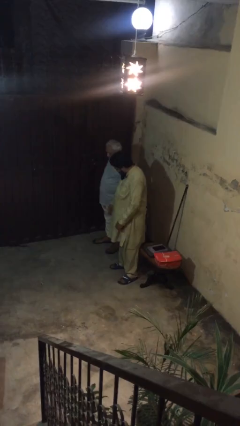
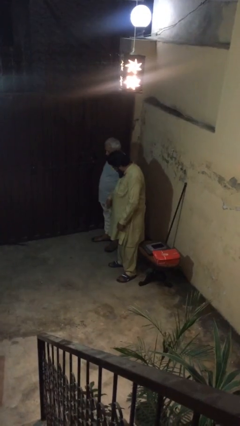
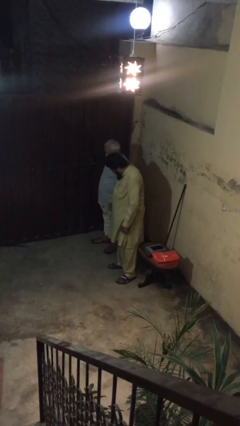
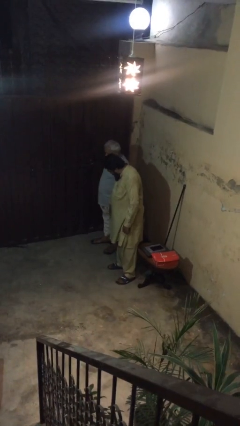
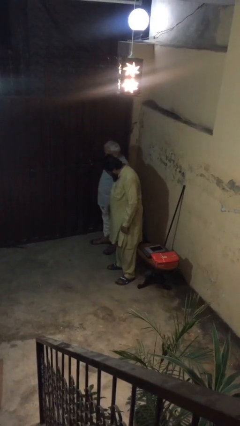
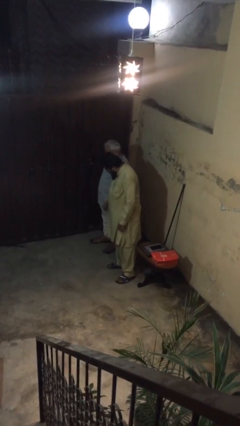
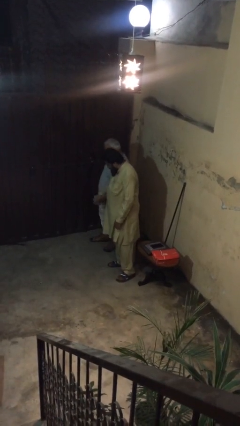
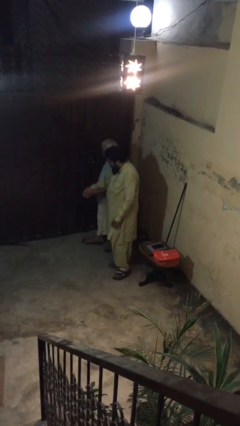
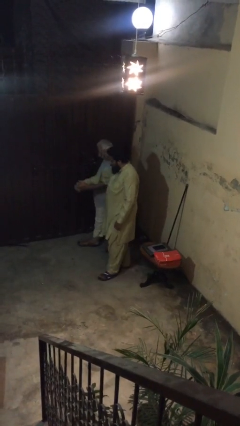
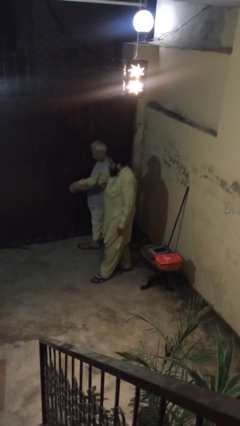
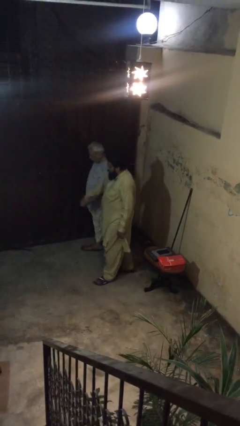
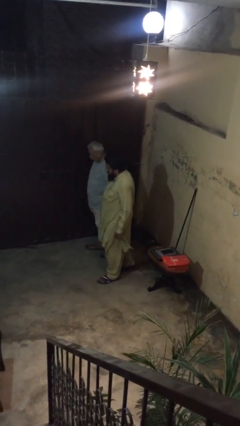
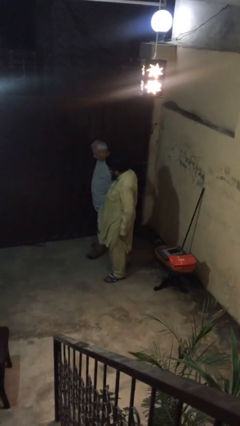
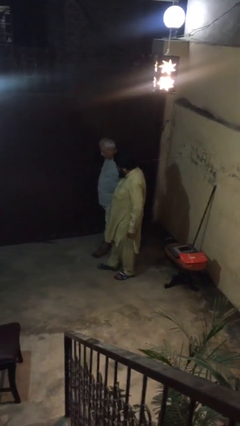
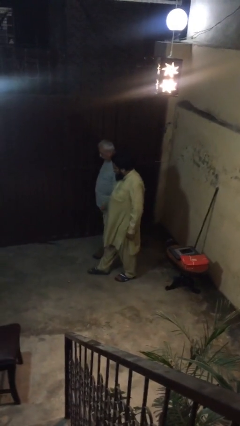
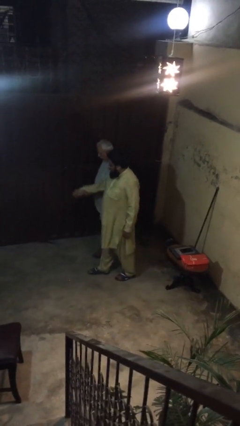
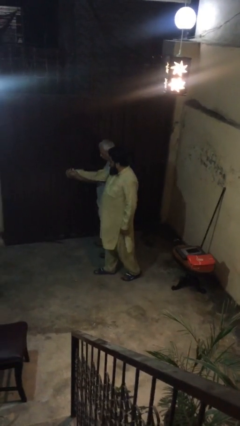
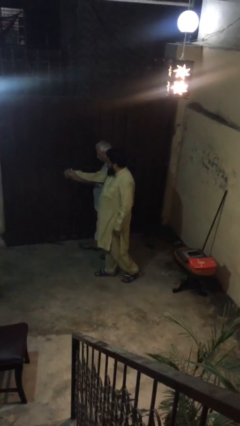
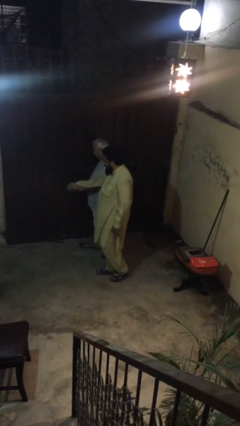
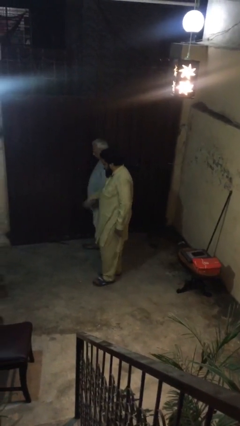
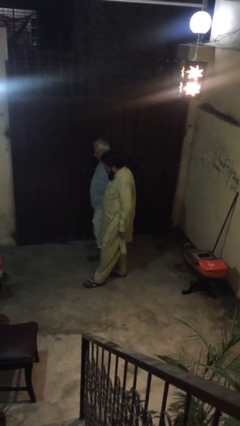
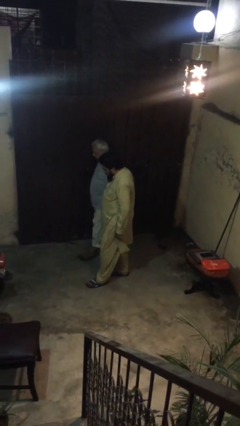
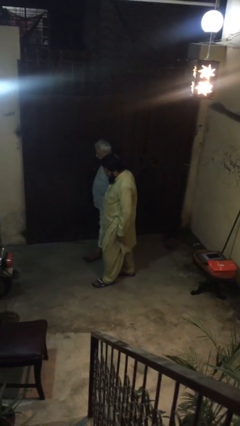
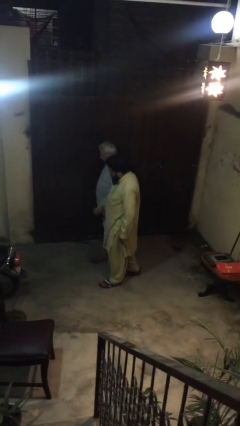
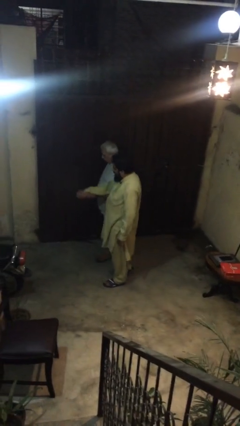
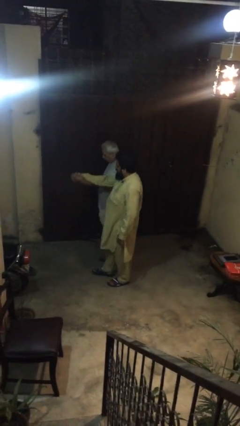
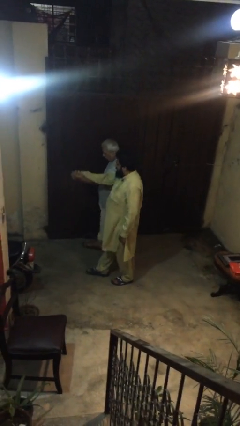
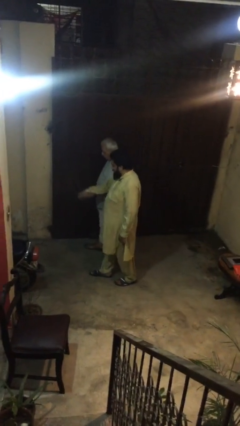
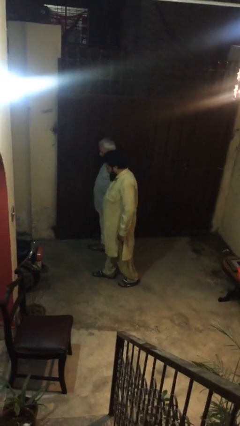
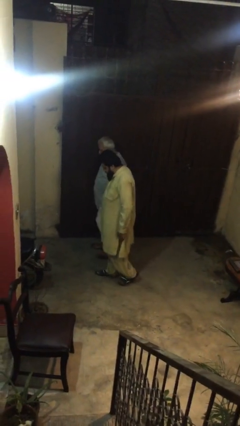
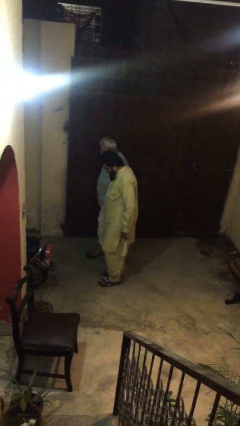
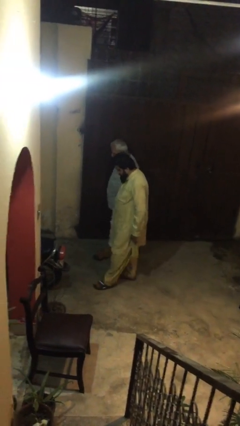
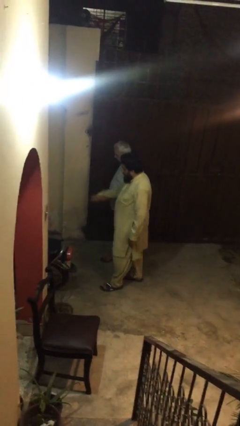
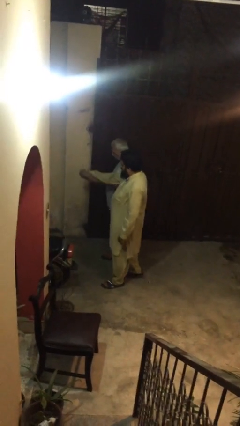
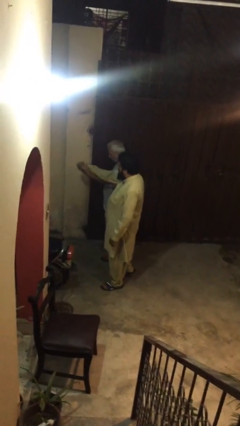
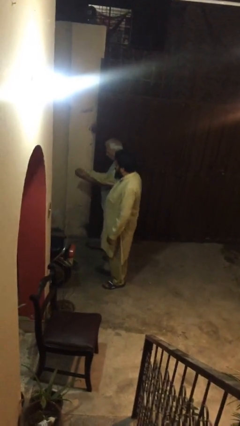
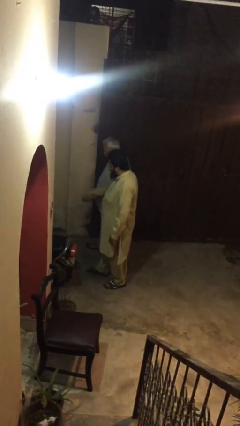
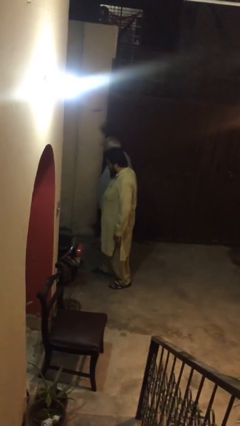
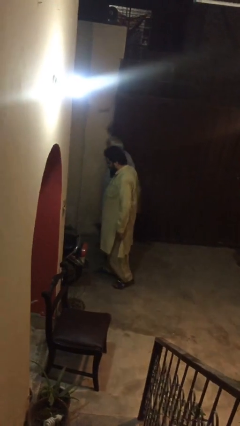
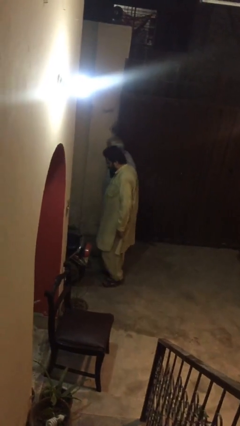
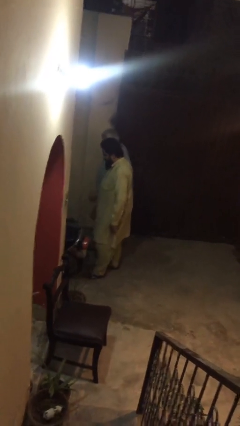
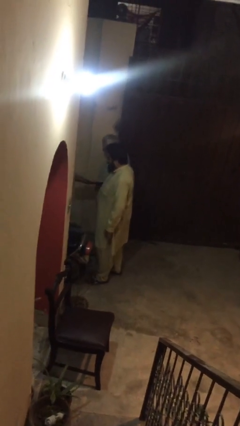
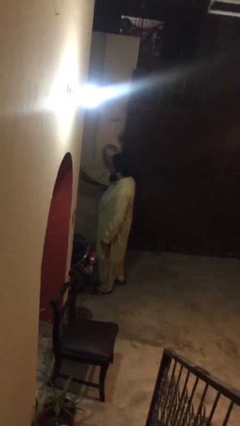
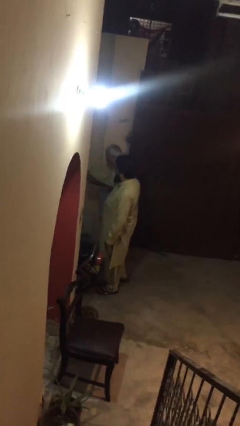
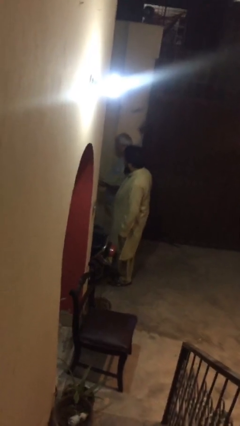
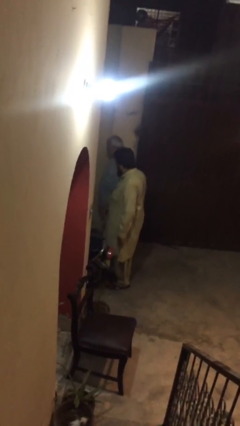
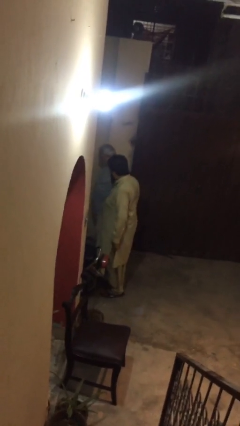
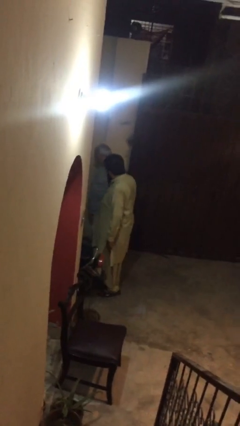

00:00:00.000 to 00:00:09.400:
person holds hand

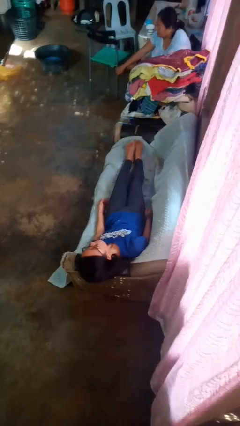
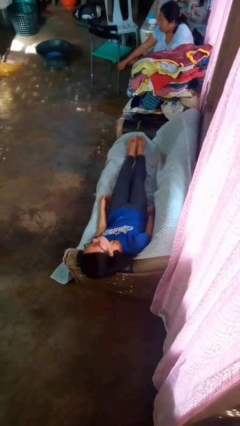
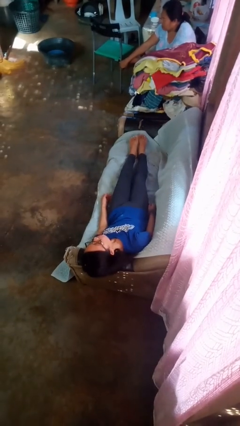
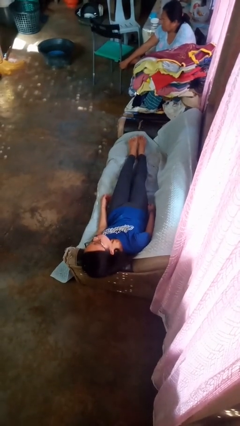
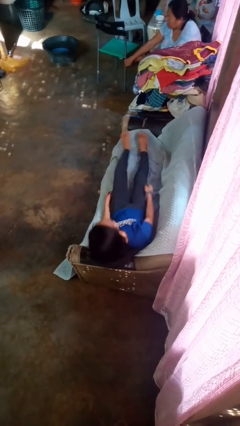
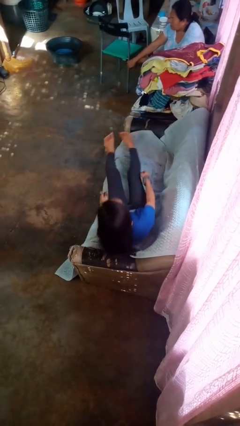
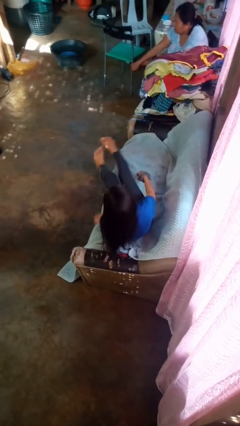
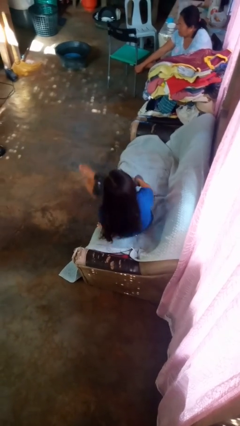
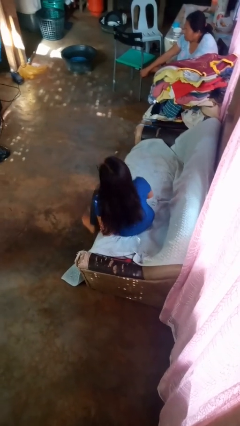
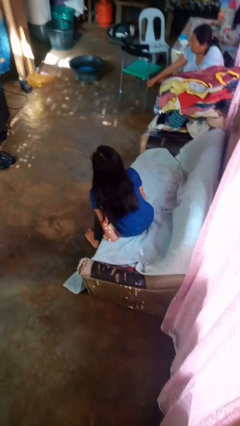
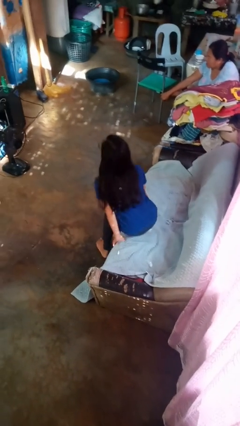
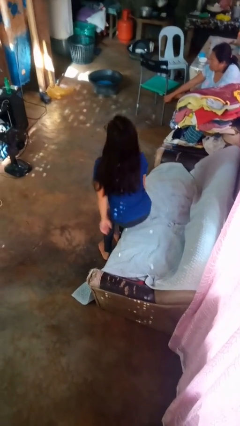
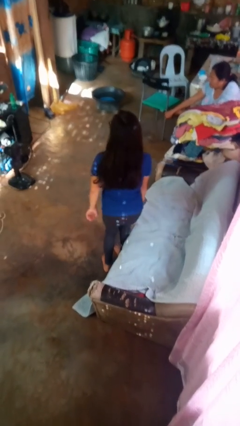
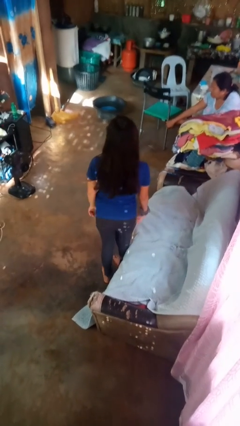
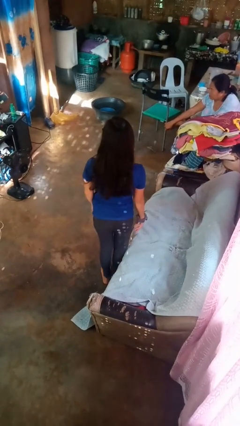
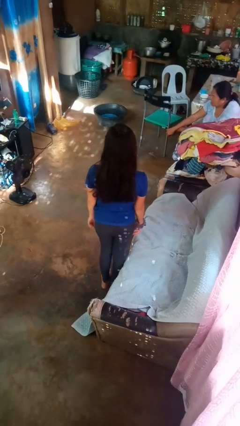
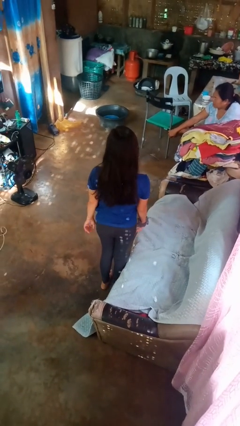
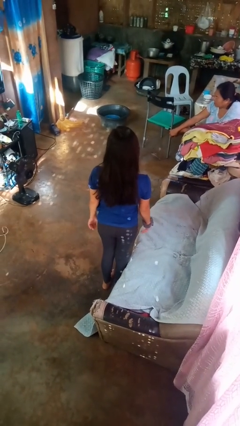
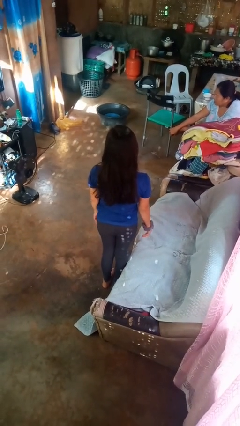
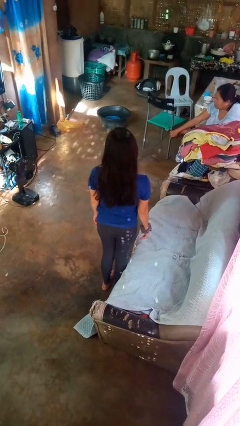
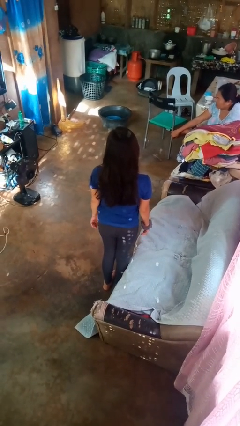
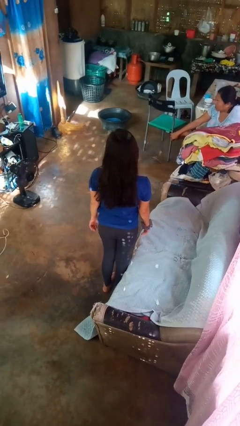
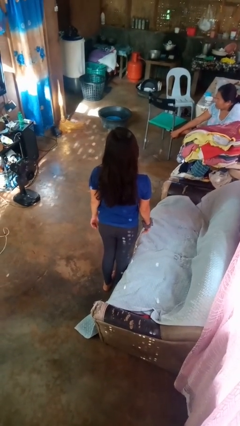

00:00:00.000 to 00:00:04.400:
person stands up

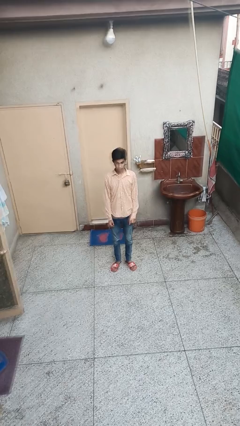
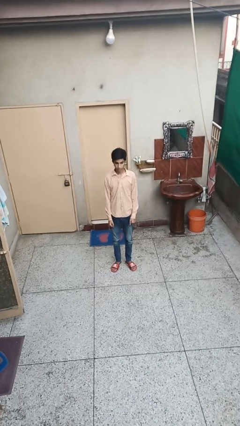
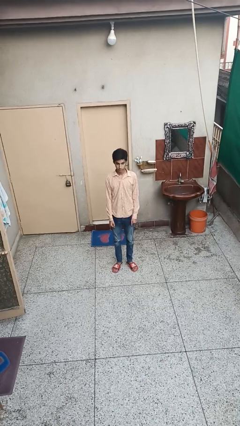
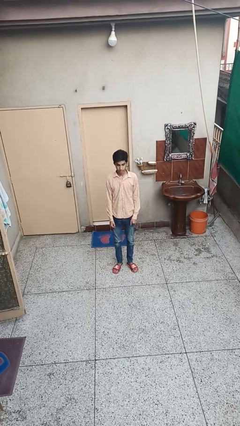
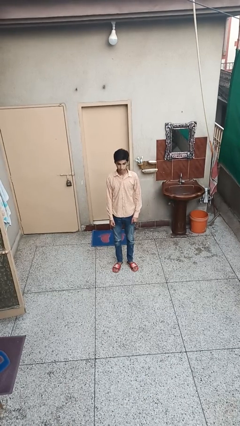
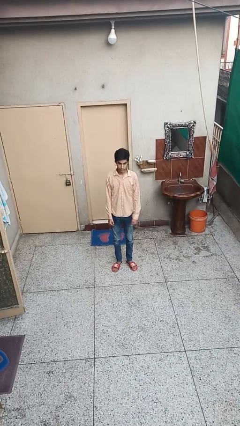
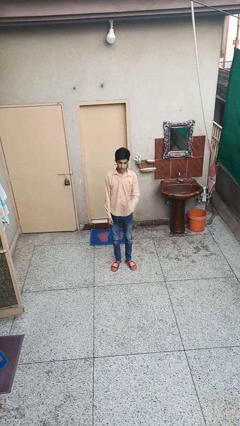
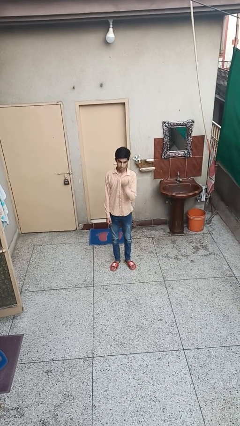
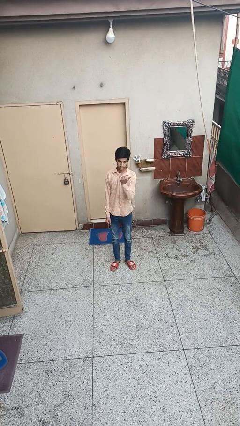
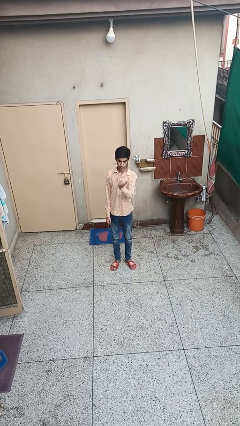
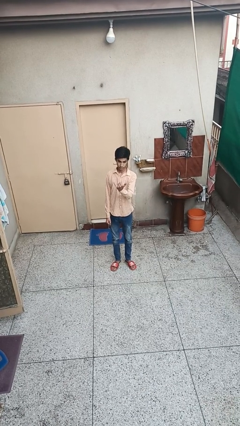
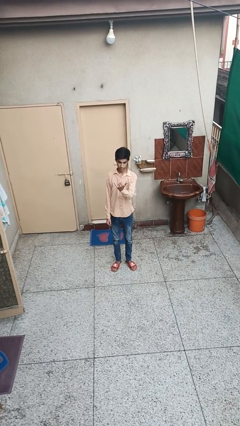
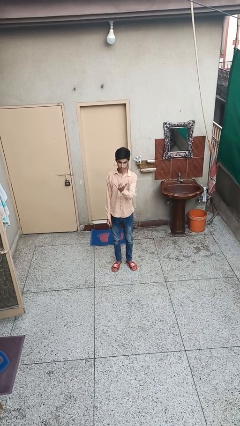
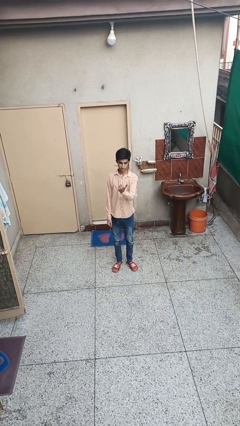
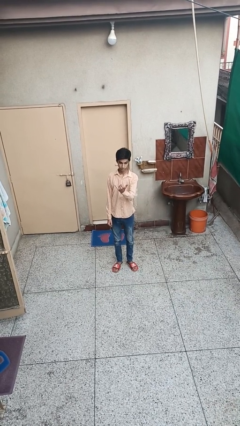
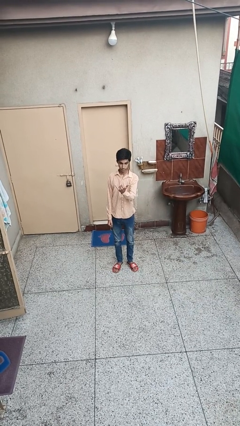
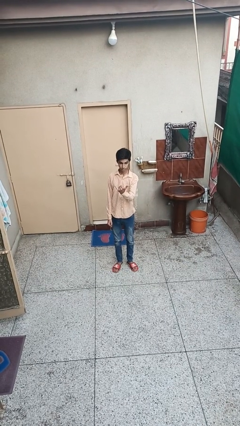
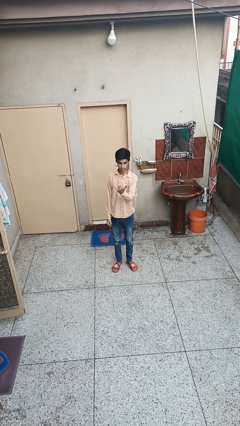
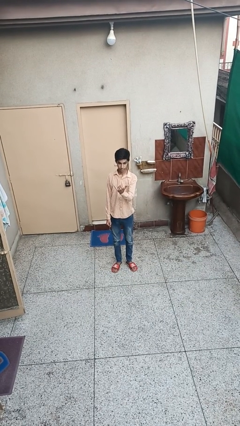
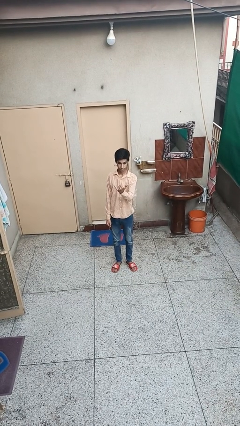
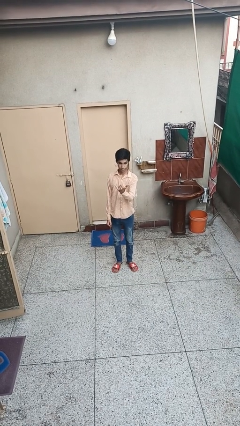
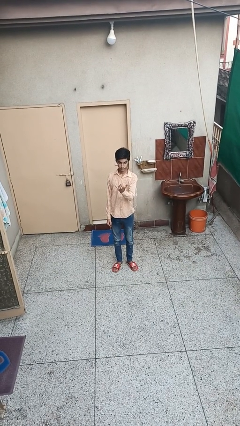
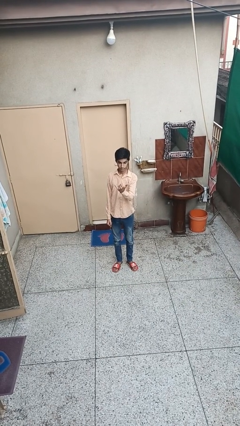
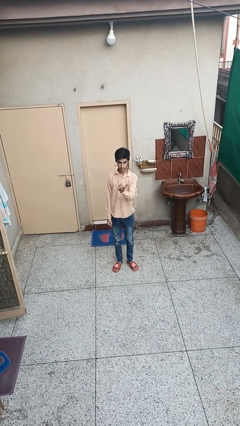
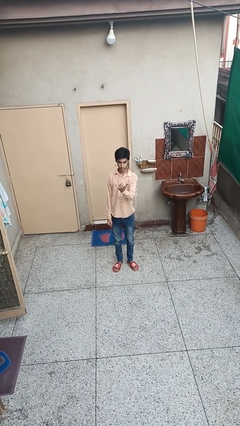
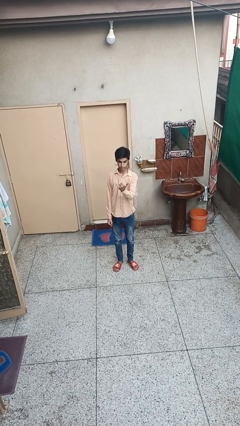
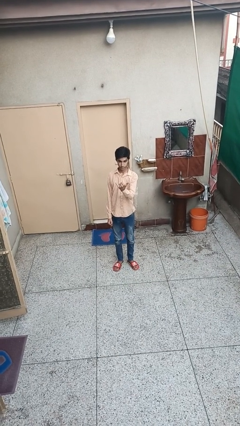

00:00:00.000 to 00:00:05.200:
person gestures hang loose
